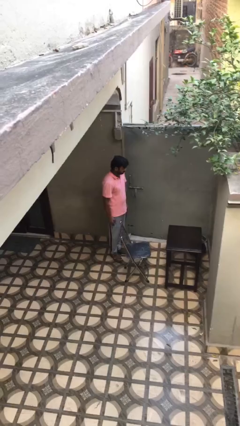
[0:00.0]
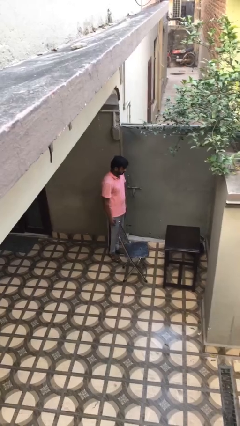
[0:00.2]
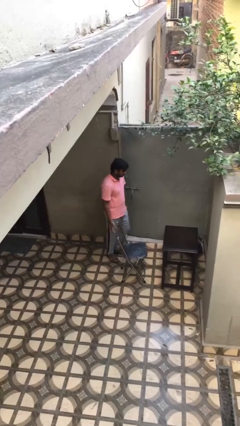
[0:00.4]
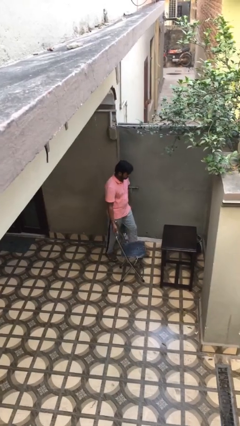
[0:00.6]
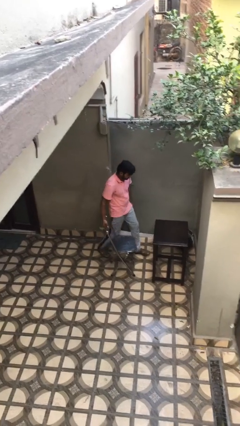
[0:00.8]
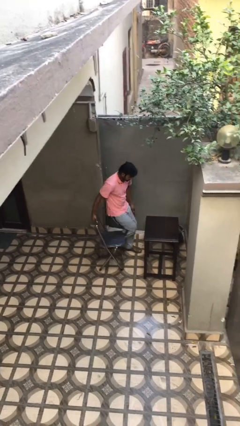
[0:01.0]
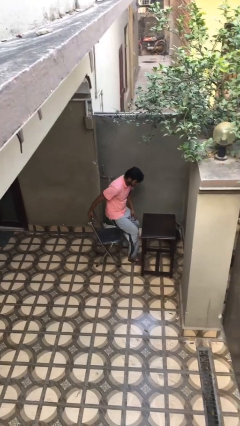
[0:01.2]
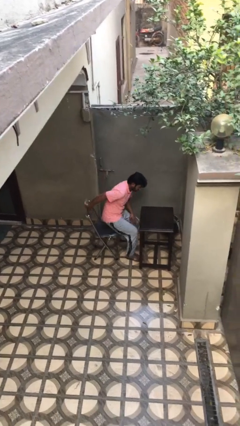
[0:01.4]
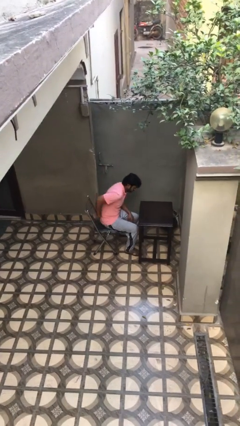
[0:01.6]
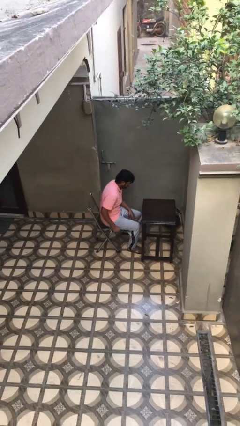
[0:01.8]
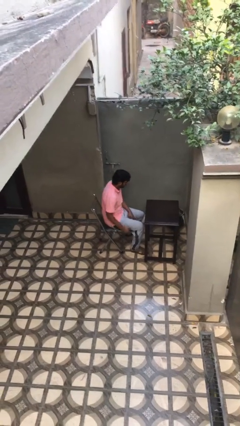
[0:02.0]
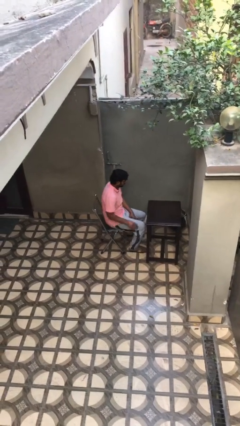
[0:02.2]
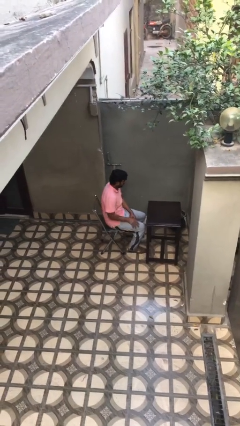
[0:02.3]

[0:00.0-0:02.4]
person sits down

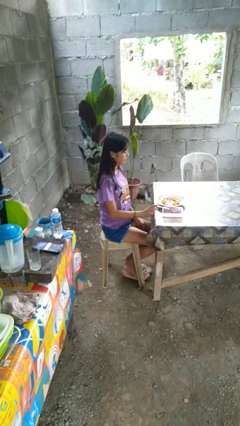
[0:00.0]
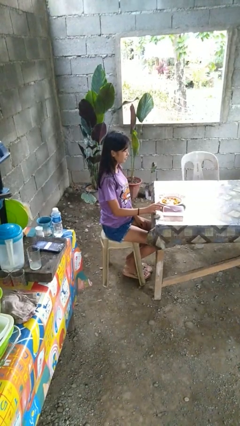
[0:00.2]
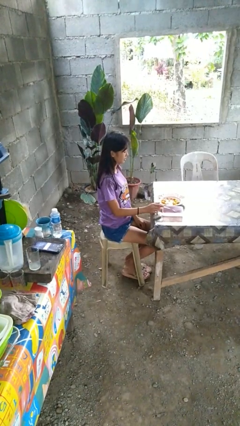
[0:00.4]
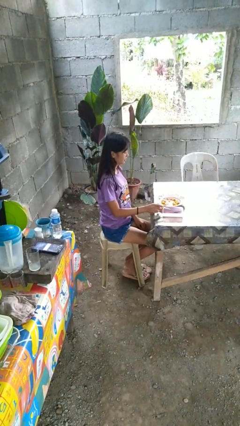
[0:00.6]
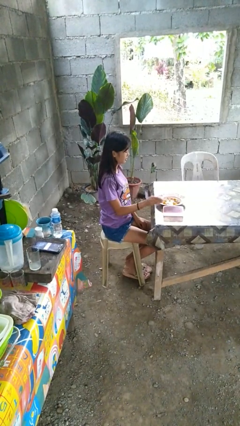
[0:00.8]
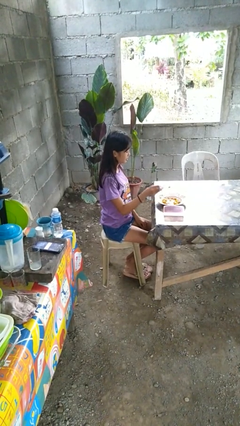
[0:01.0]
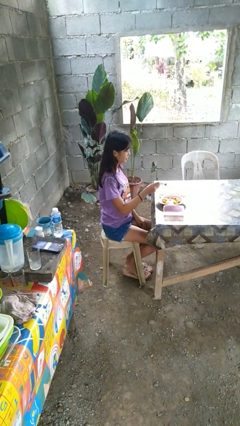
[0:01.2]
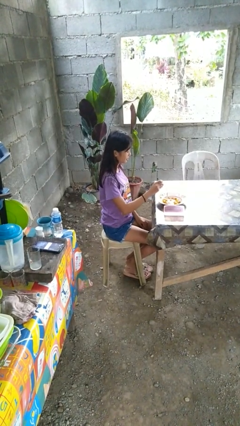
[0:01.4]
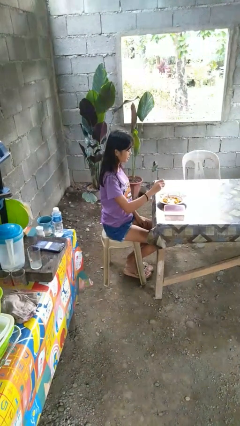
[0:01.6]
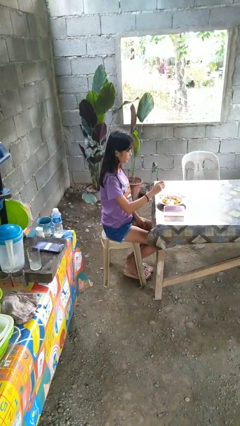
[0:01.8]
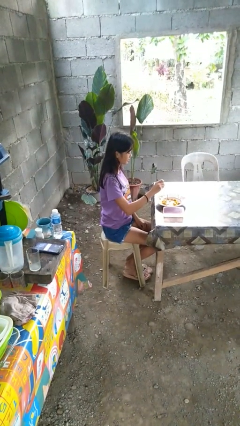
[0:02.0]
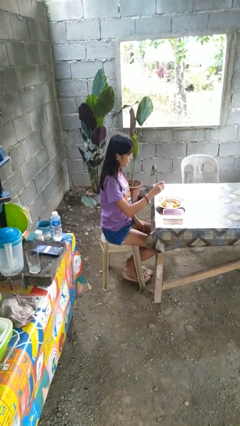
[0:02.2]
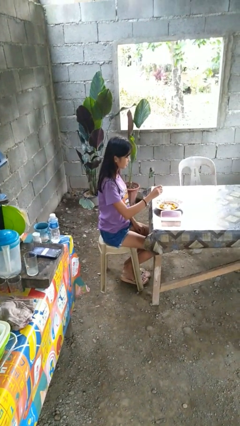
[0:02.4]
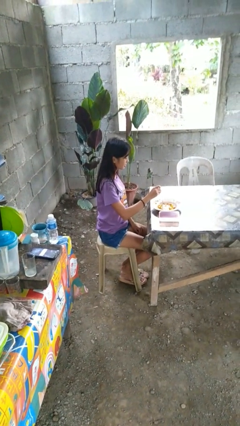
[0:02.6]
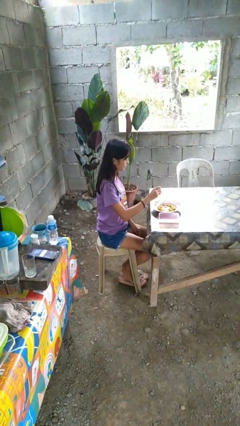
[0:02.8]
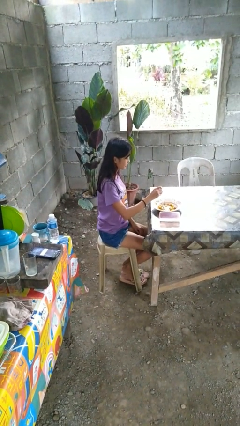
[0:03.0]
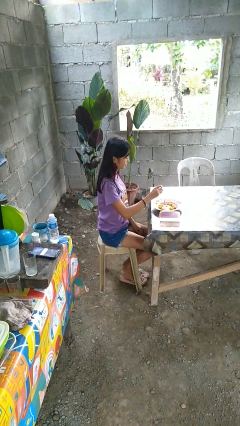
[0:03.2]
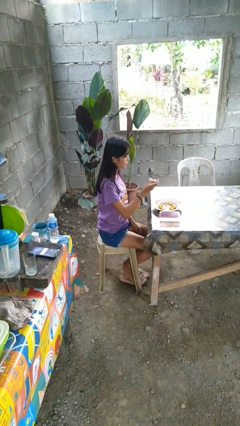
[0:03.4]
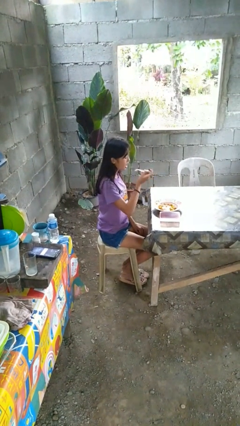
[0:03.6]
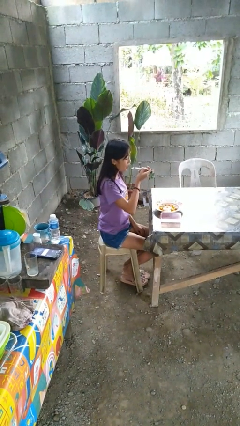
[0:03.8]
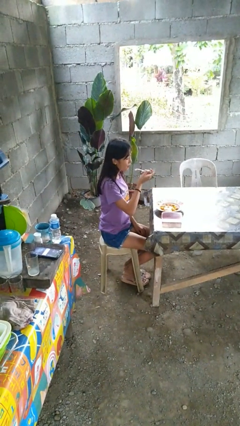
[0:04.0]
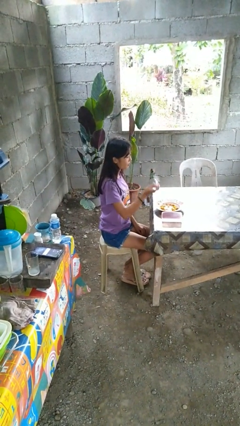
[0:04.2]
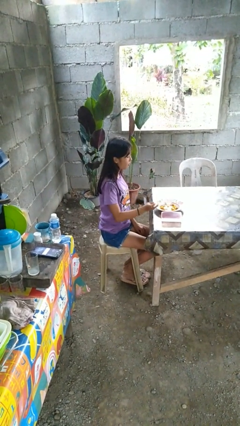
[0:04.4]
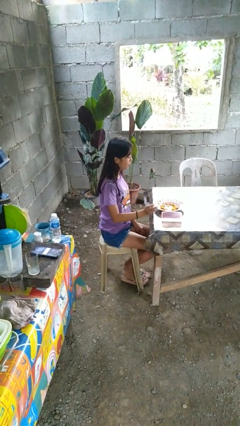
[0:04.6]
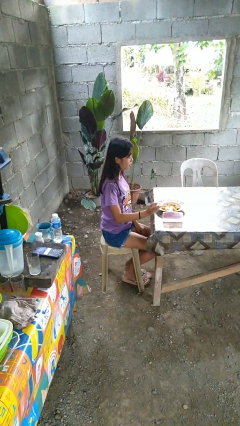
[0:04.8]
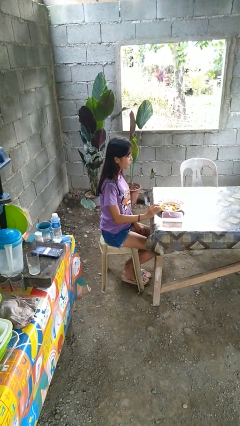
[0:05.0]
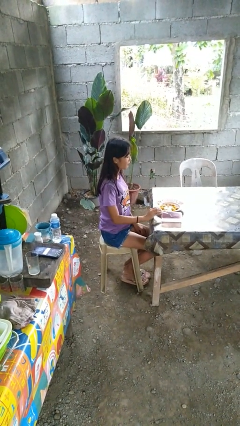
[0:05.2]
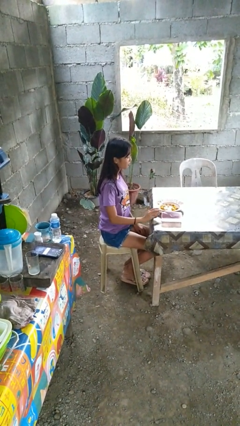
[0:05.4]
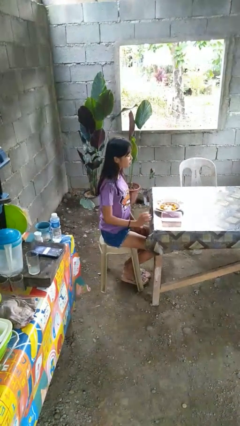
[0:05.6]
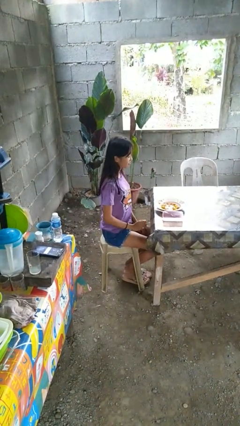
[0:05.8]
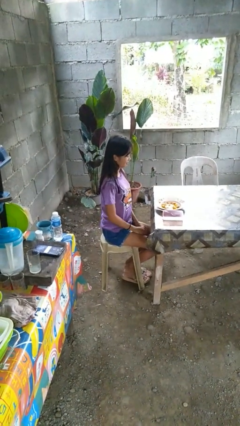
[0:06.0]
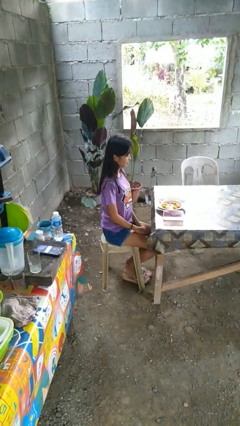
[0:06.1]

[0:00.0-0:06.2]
person eats with utensil

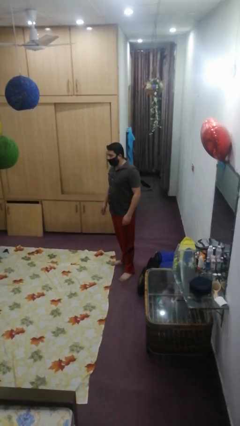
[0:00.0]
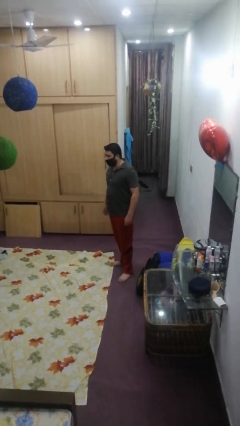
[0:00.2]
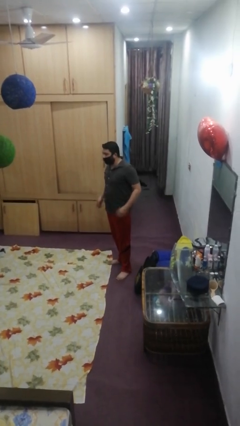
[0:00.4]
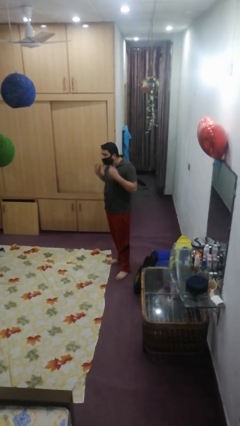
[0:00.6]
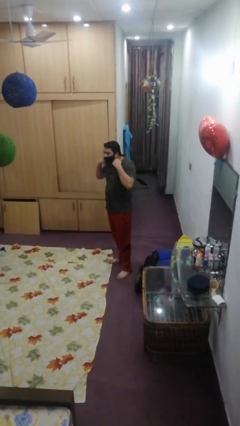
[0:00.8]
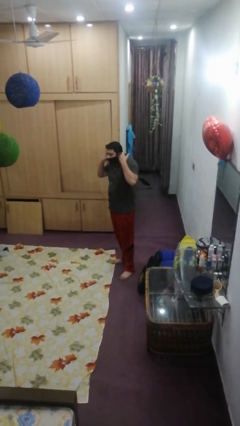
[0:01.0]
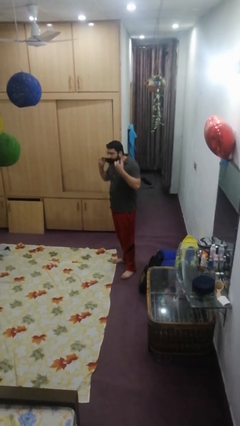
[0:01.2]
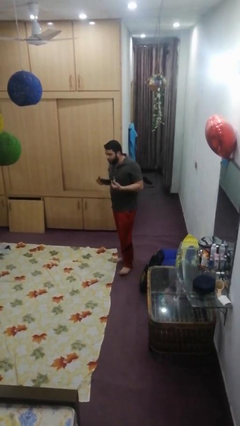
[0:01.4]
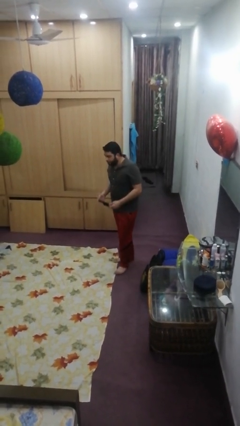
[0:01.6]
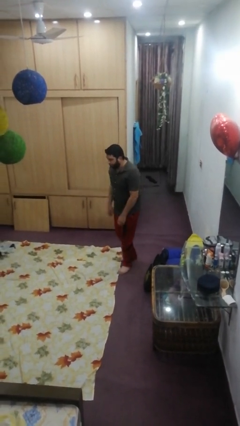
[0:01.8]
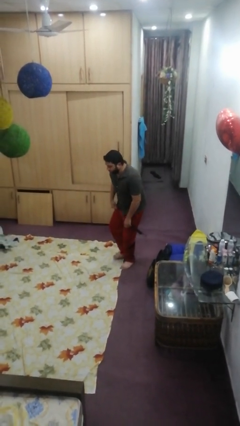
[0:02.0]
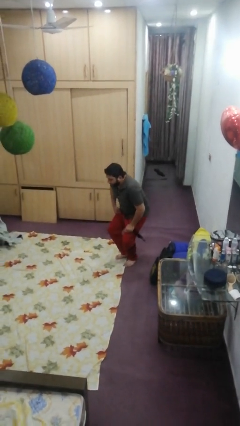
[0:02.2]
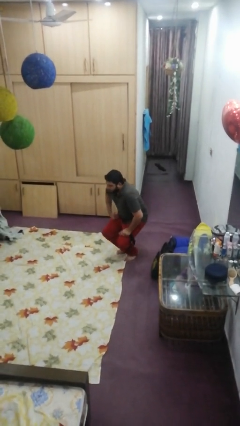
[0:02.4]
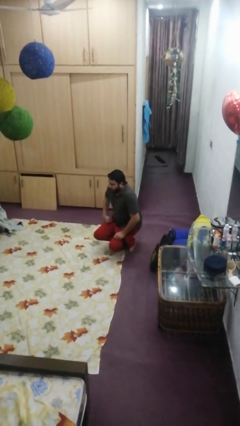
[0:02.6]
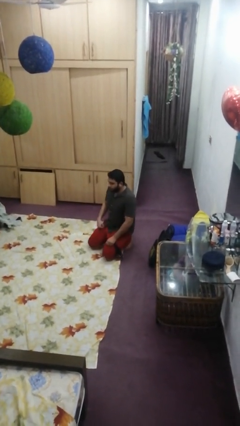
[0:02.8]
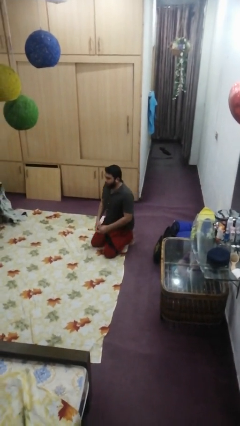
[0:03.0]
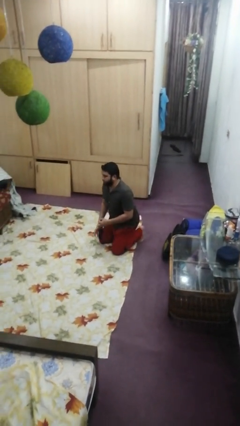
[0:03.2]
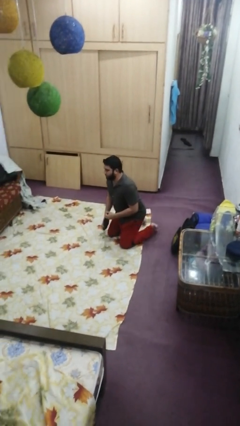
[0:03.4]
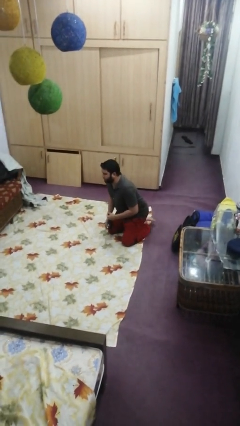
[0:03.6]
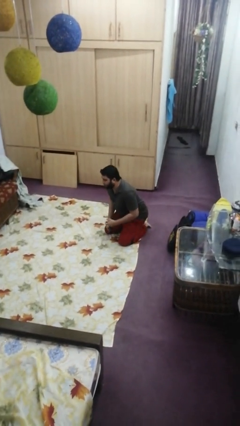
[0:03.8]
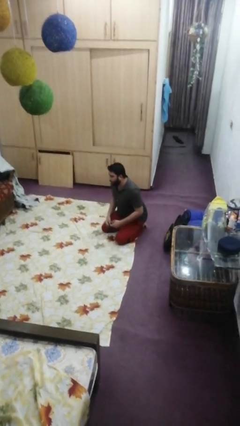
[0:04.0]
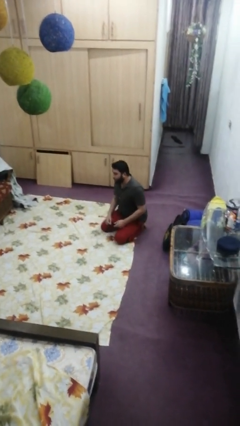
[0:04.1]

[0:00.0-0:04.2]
person takes off facemask

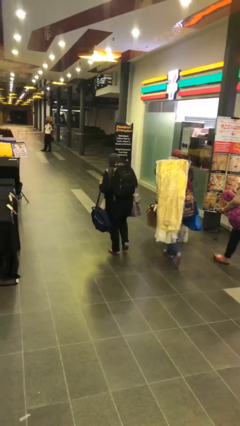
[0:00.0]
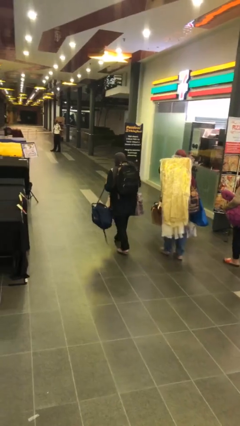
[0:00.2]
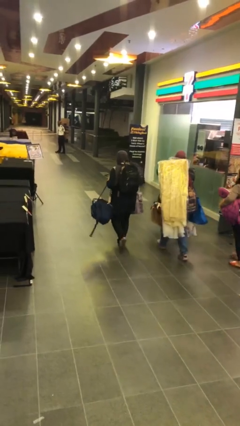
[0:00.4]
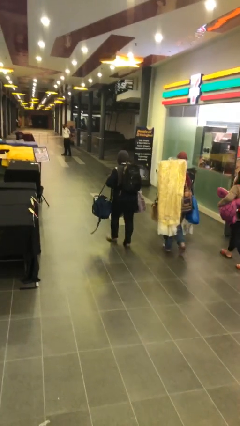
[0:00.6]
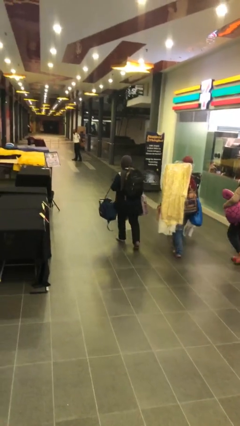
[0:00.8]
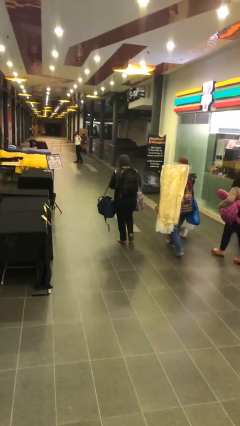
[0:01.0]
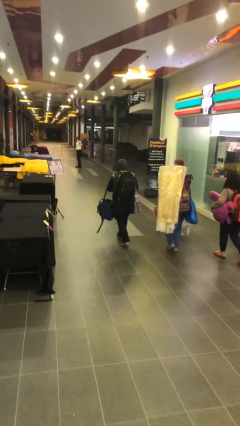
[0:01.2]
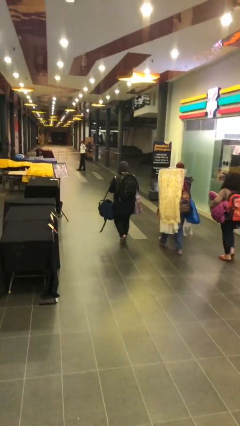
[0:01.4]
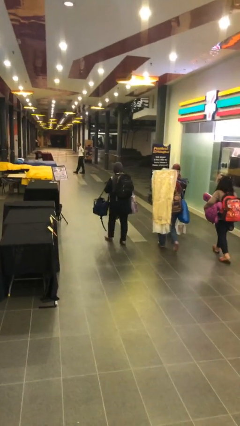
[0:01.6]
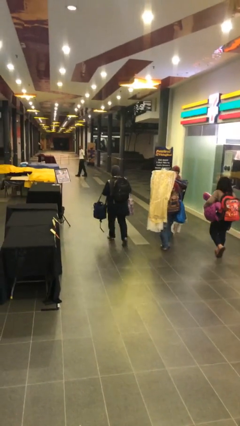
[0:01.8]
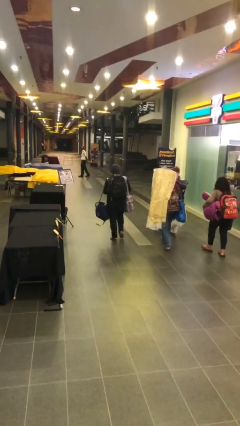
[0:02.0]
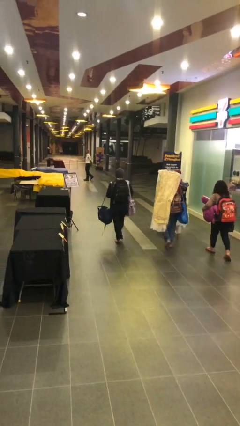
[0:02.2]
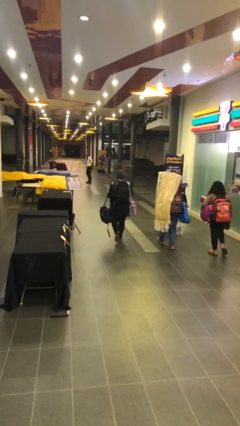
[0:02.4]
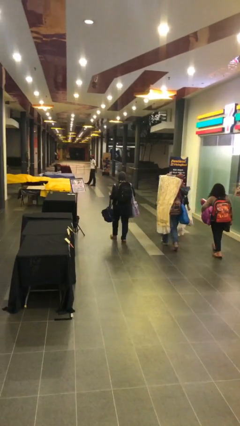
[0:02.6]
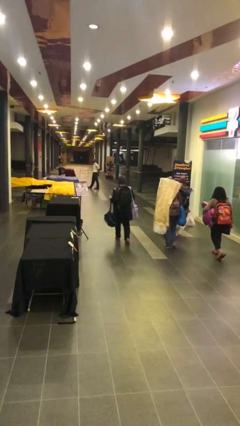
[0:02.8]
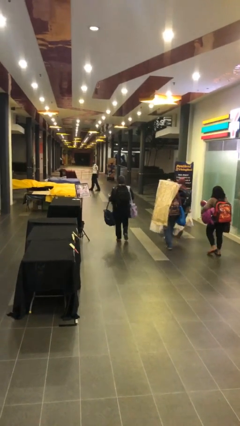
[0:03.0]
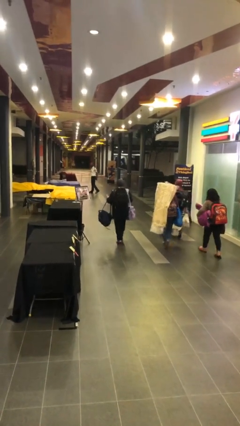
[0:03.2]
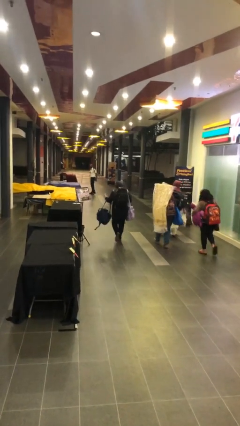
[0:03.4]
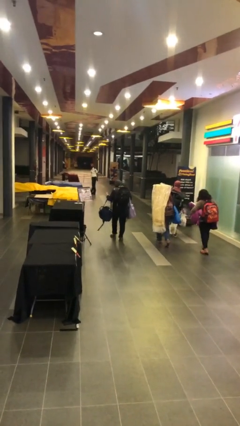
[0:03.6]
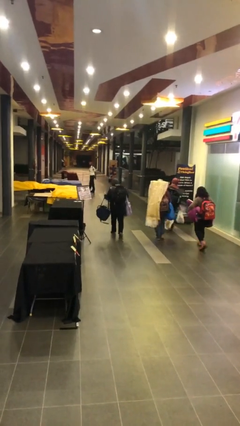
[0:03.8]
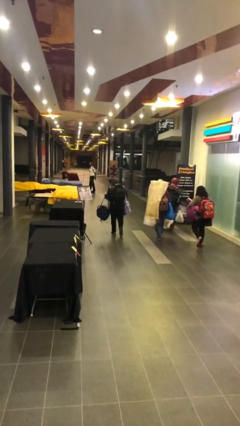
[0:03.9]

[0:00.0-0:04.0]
person talks to person

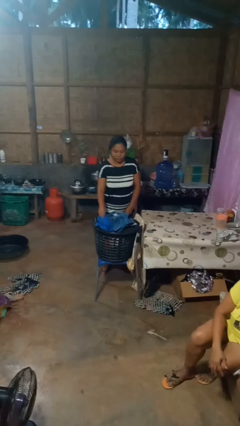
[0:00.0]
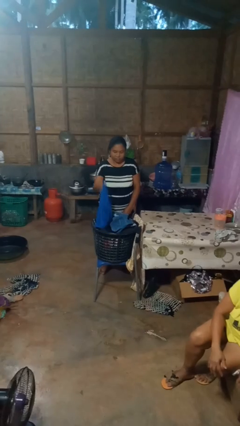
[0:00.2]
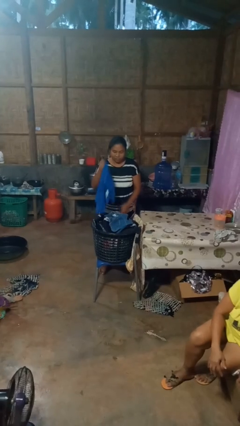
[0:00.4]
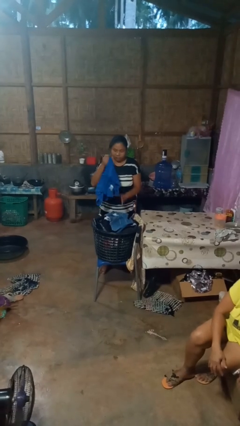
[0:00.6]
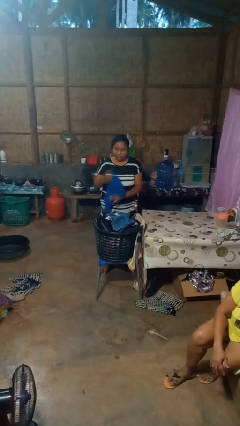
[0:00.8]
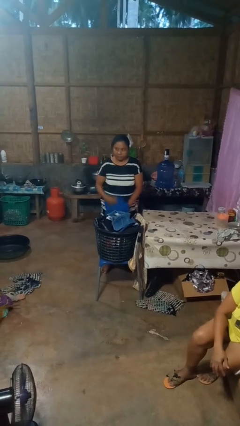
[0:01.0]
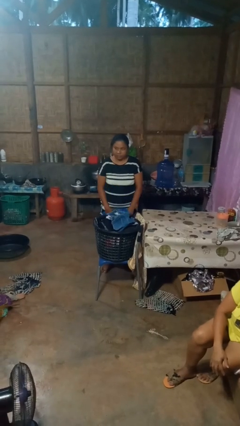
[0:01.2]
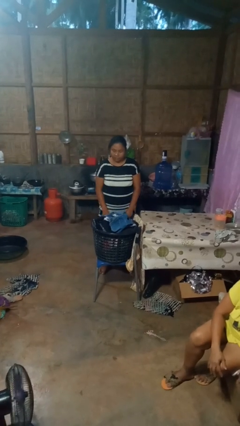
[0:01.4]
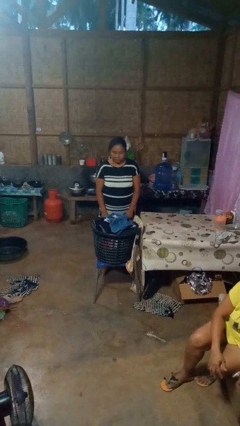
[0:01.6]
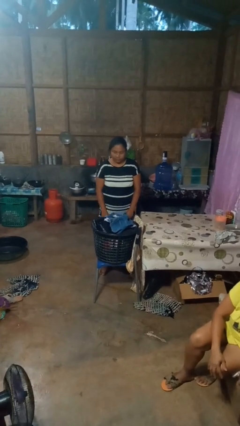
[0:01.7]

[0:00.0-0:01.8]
person takes object from basket
